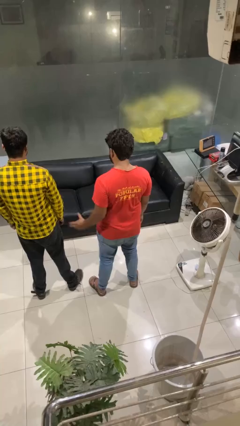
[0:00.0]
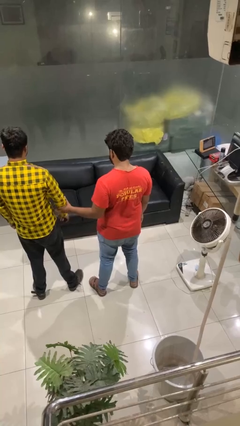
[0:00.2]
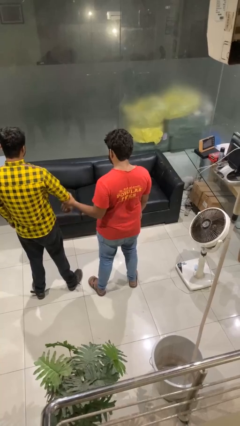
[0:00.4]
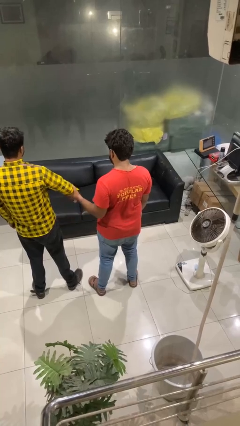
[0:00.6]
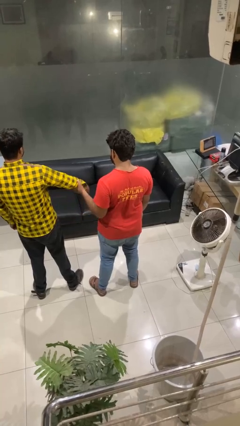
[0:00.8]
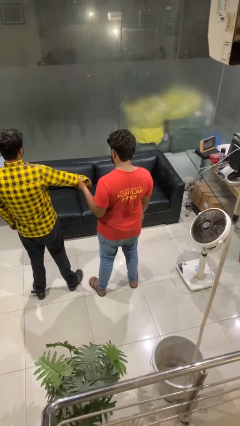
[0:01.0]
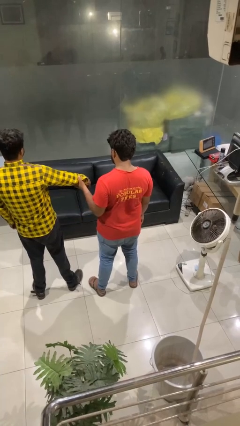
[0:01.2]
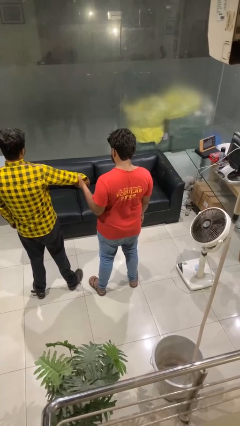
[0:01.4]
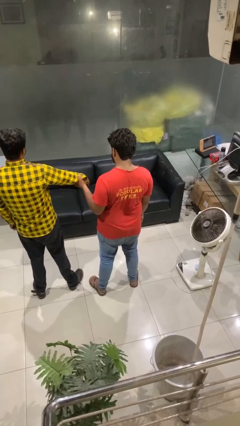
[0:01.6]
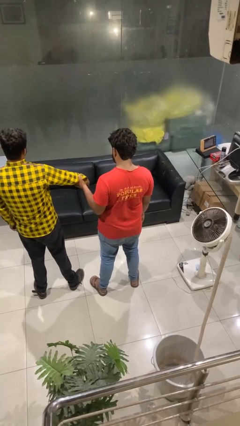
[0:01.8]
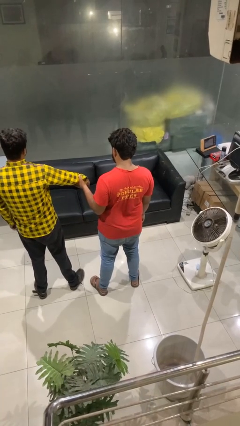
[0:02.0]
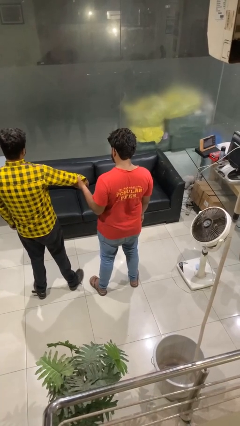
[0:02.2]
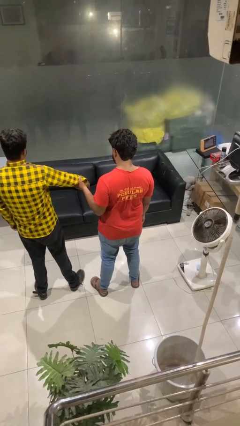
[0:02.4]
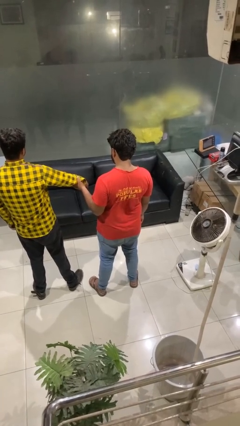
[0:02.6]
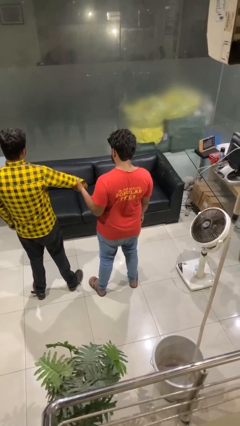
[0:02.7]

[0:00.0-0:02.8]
person grabs person by forearm

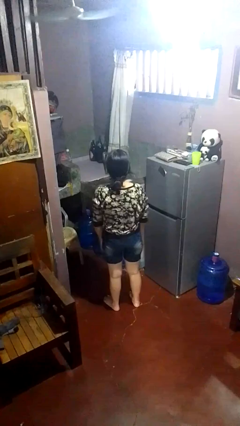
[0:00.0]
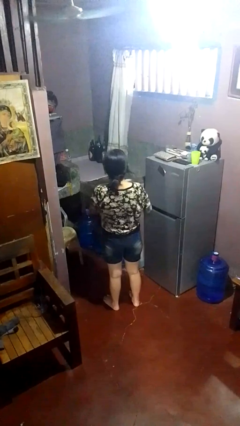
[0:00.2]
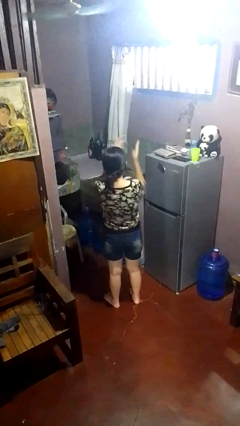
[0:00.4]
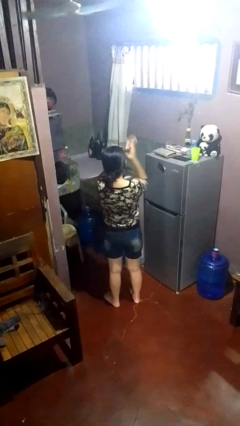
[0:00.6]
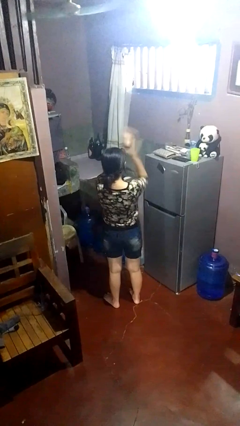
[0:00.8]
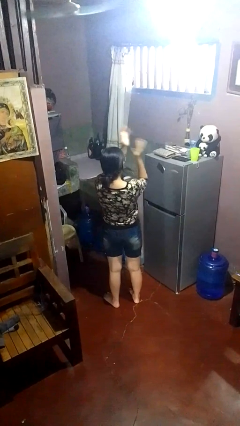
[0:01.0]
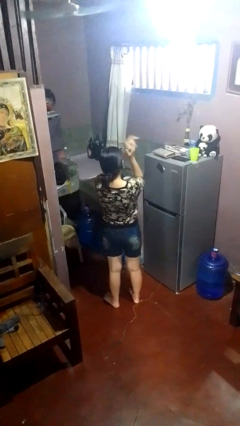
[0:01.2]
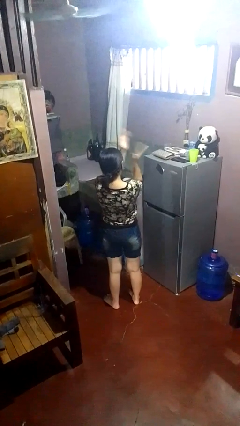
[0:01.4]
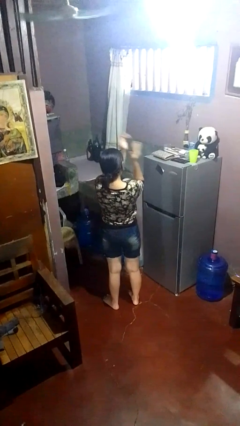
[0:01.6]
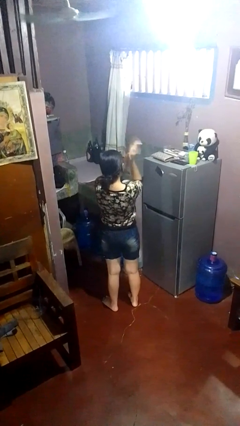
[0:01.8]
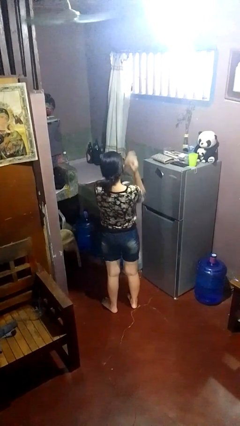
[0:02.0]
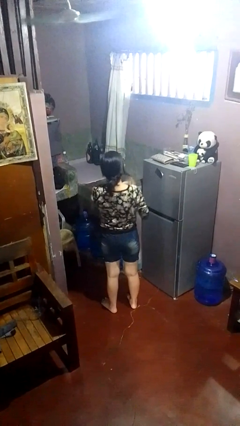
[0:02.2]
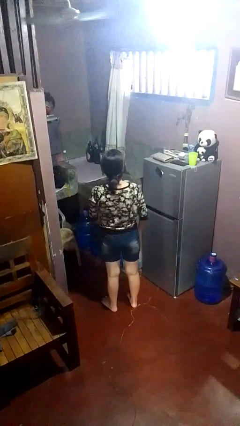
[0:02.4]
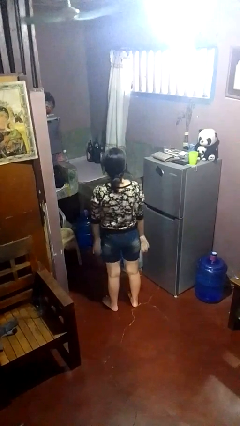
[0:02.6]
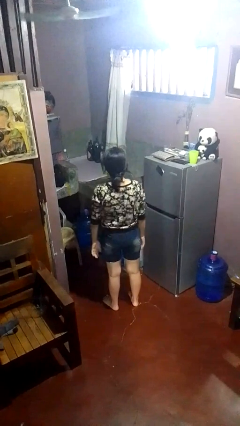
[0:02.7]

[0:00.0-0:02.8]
person claps hands

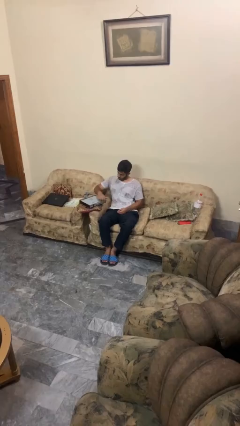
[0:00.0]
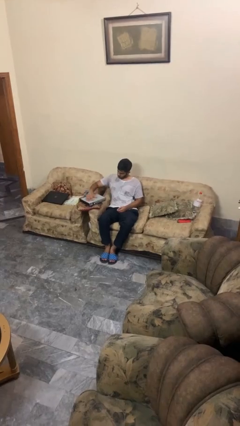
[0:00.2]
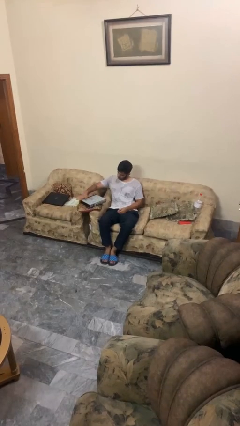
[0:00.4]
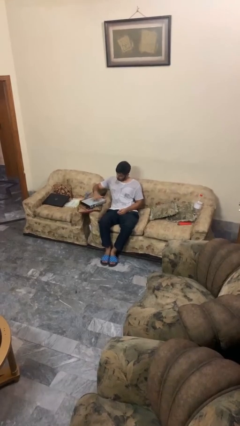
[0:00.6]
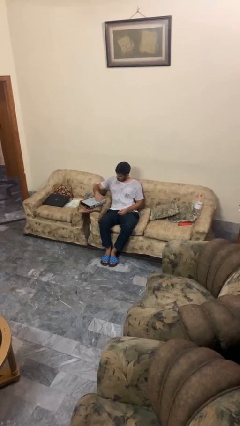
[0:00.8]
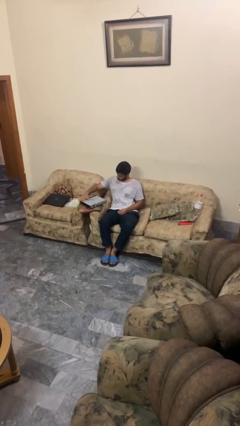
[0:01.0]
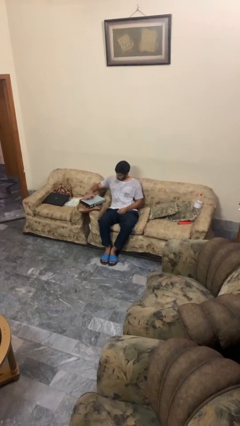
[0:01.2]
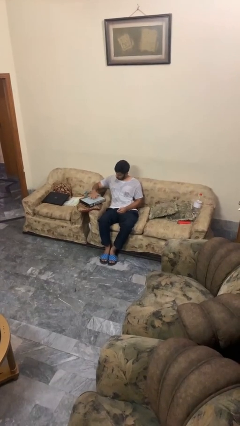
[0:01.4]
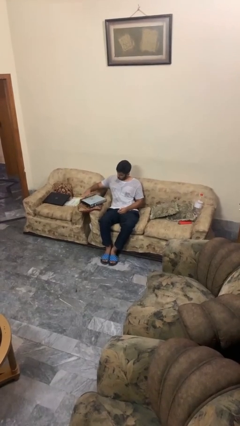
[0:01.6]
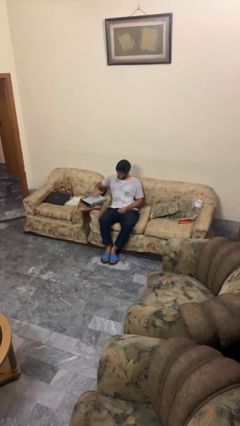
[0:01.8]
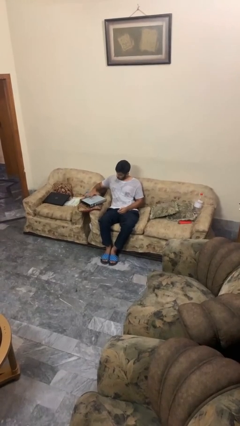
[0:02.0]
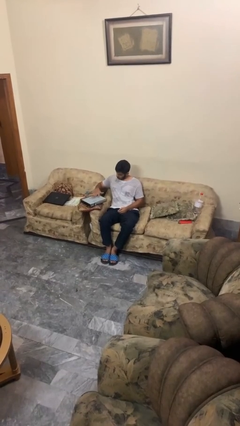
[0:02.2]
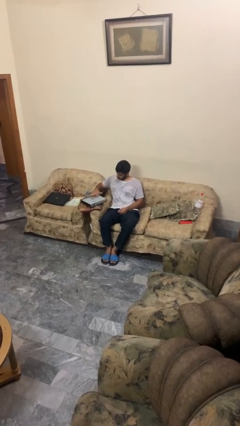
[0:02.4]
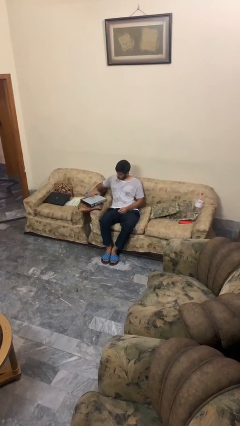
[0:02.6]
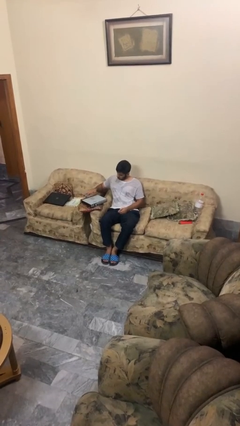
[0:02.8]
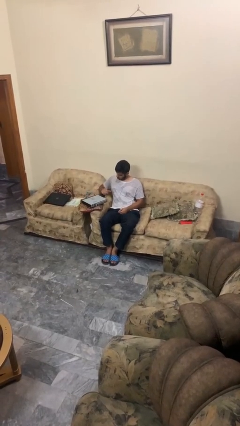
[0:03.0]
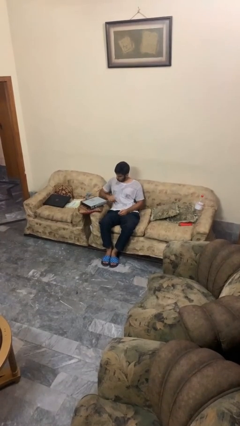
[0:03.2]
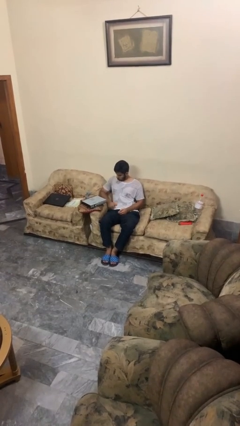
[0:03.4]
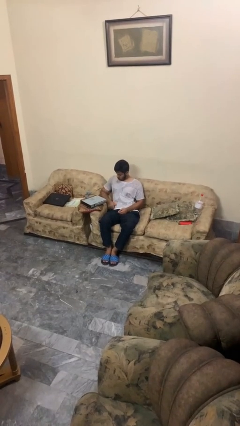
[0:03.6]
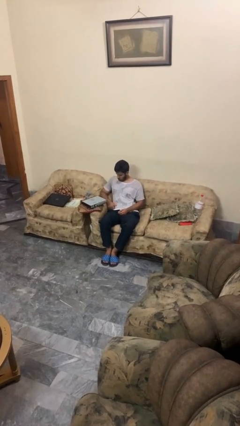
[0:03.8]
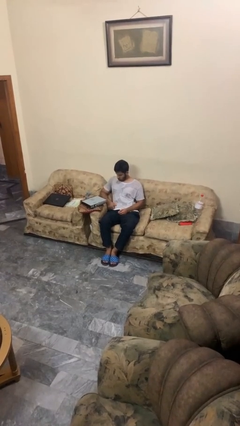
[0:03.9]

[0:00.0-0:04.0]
person waves hand over object

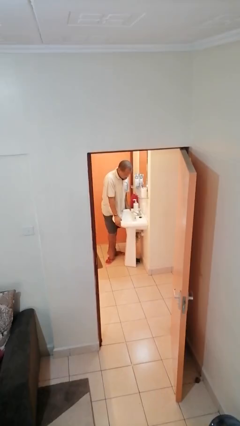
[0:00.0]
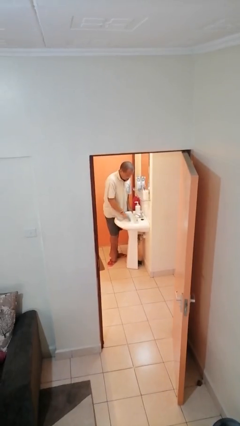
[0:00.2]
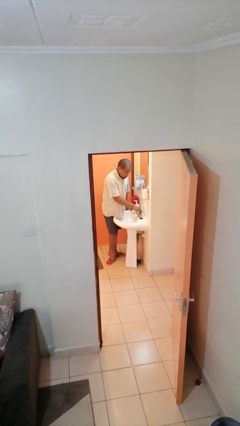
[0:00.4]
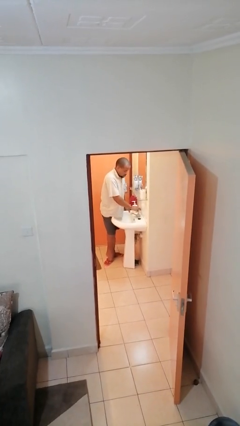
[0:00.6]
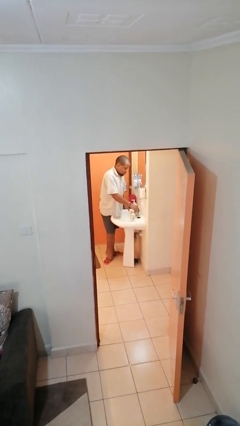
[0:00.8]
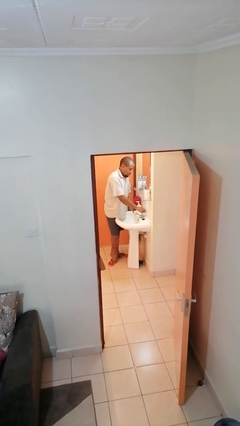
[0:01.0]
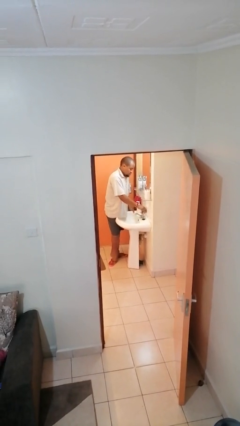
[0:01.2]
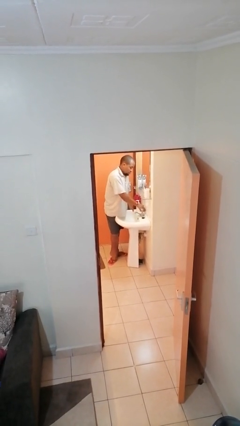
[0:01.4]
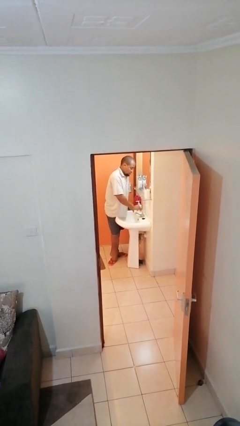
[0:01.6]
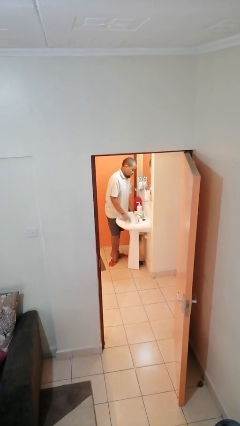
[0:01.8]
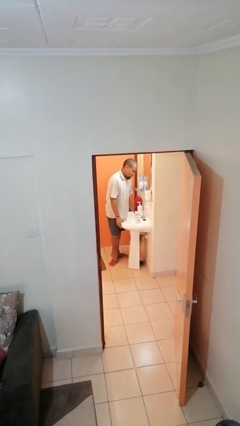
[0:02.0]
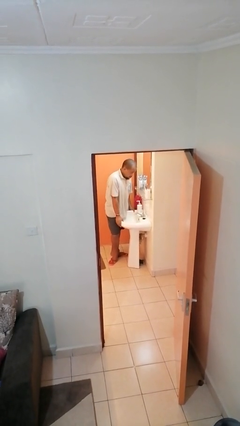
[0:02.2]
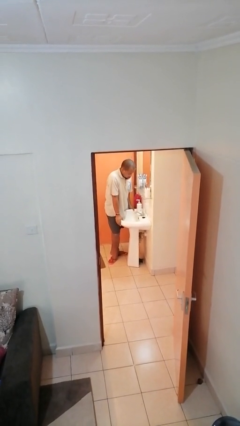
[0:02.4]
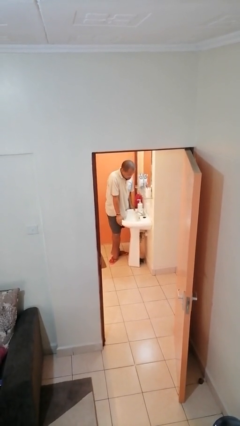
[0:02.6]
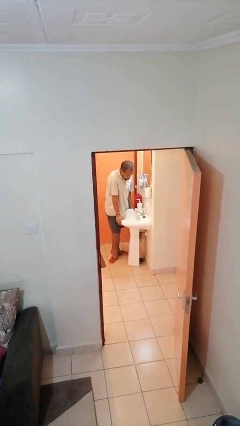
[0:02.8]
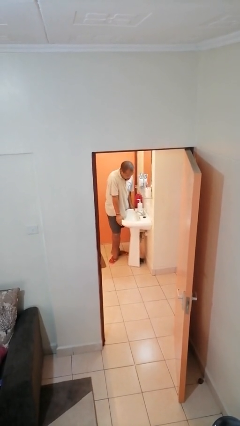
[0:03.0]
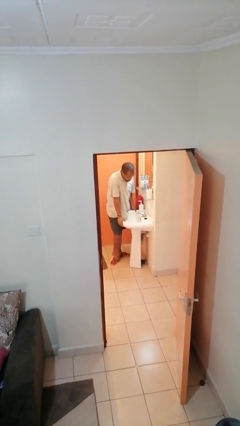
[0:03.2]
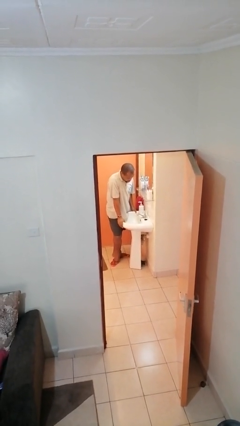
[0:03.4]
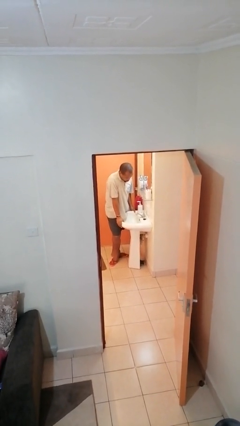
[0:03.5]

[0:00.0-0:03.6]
person turns on faucet

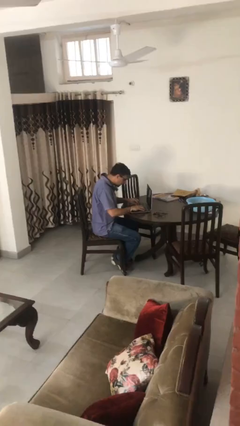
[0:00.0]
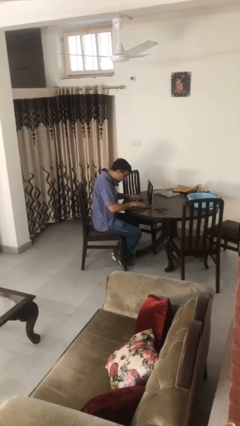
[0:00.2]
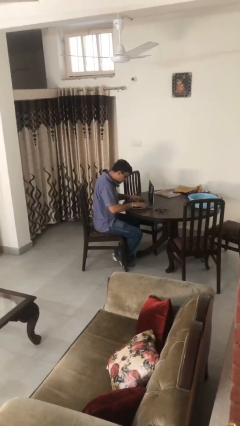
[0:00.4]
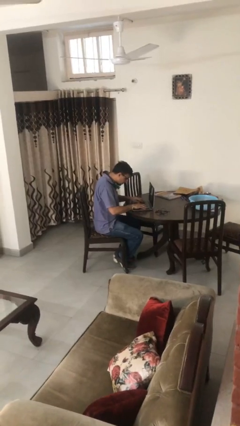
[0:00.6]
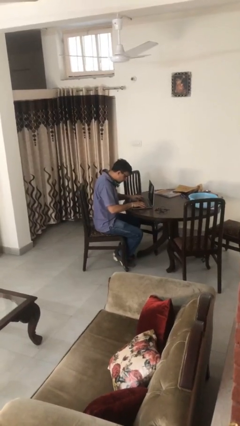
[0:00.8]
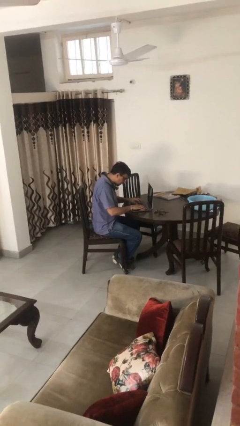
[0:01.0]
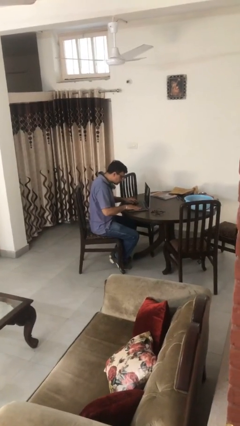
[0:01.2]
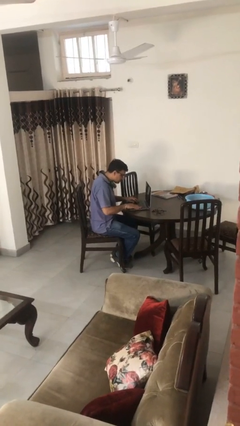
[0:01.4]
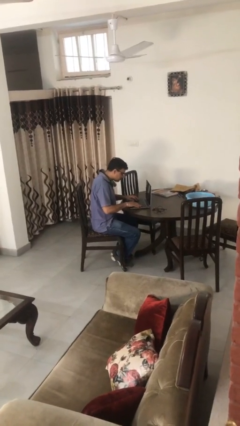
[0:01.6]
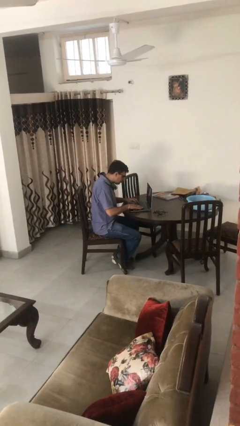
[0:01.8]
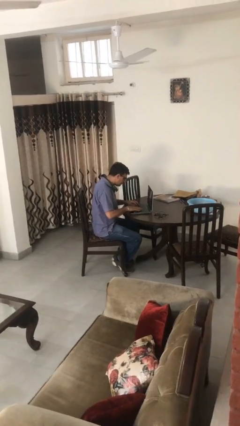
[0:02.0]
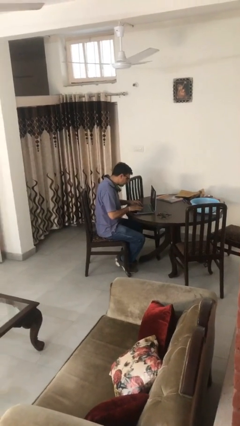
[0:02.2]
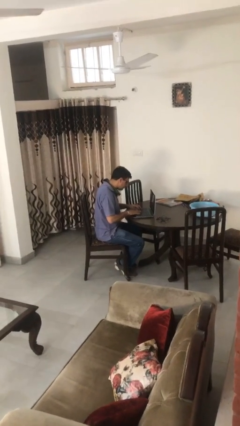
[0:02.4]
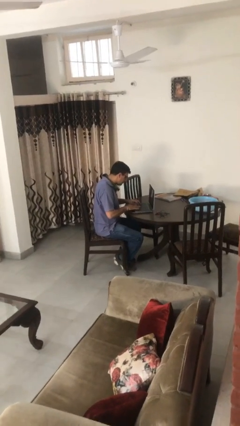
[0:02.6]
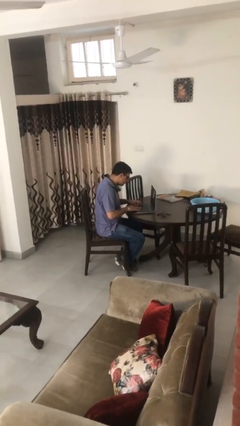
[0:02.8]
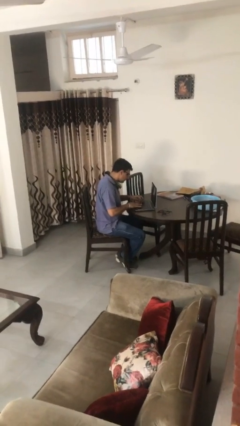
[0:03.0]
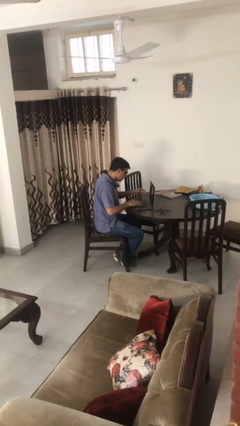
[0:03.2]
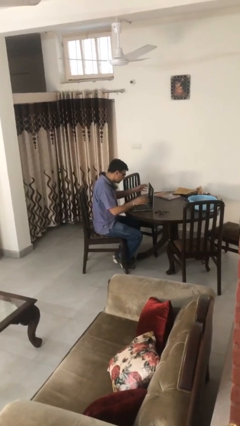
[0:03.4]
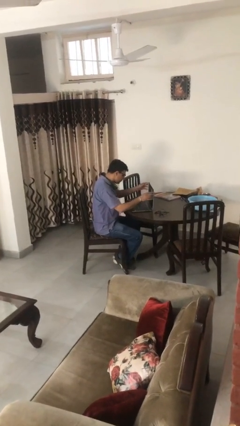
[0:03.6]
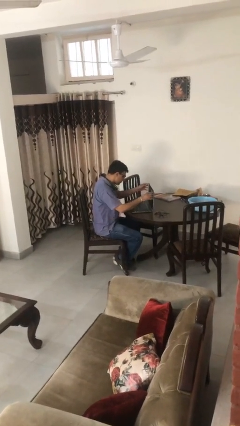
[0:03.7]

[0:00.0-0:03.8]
person interacts with laptop

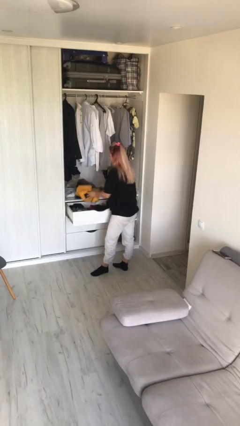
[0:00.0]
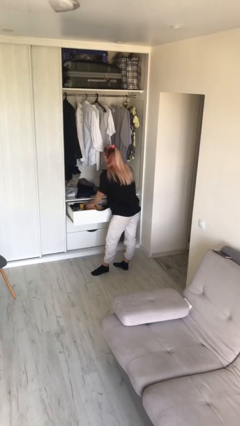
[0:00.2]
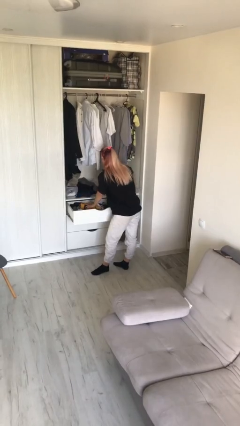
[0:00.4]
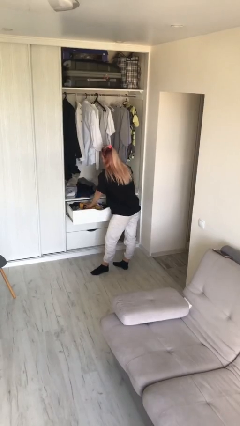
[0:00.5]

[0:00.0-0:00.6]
person puts clothes into dresser
